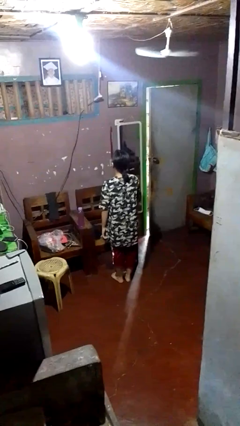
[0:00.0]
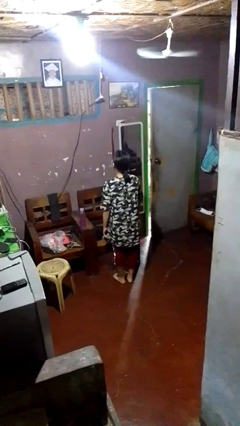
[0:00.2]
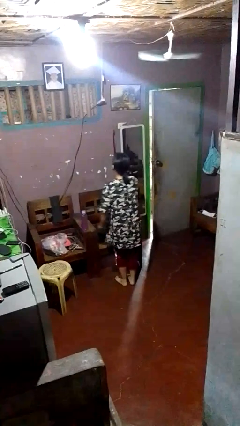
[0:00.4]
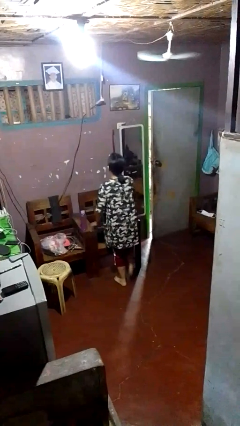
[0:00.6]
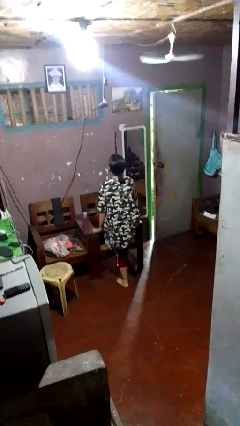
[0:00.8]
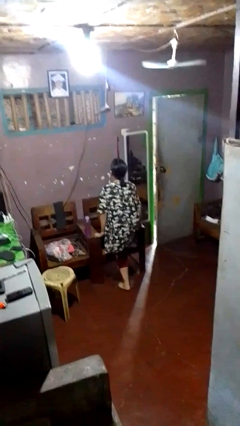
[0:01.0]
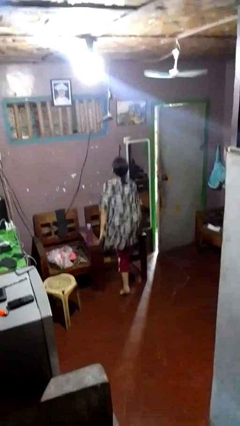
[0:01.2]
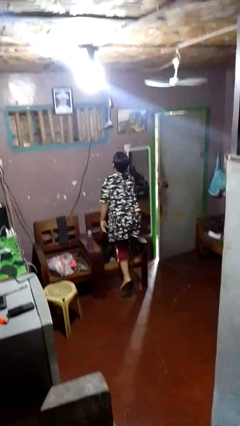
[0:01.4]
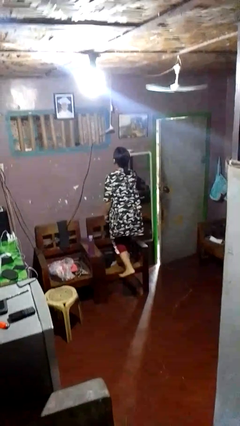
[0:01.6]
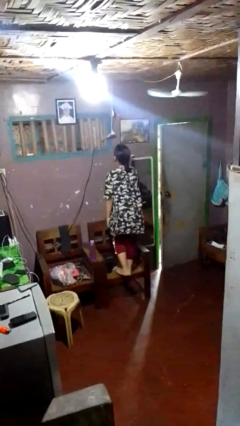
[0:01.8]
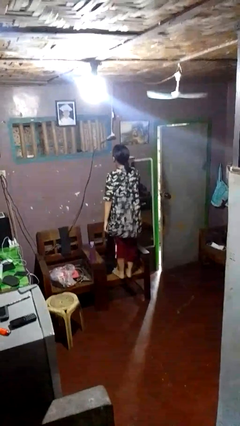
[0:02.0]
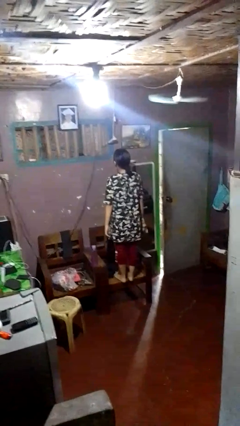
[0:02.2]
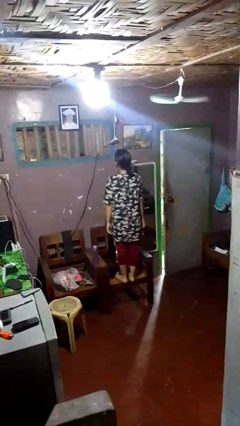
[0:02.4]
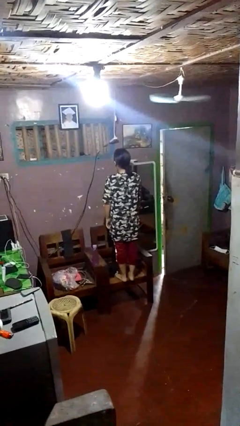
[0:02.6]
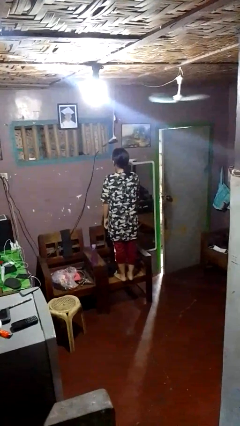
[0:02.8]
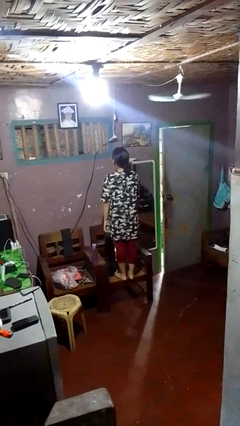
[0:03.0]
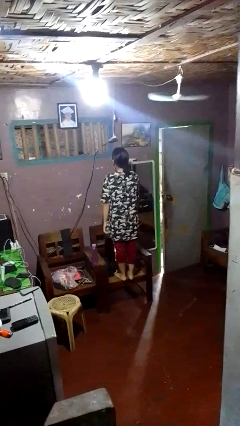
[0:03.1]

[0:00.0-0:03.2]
person climbs on chair

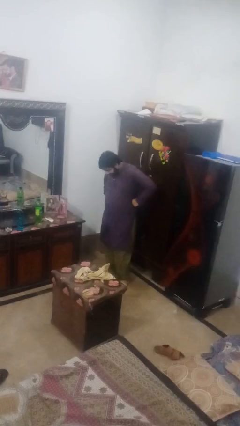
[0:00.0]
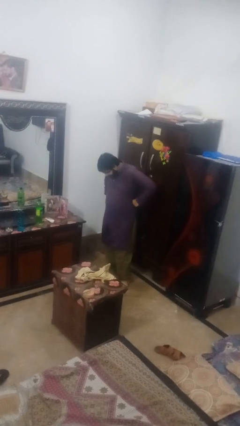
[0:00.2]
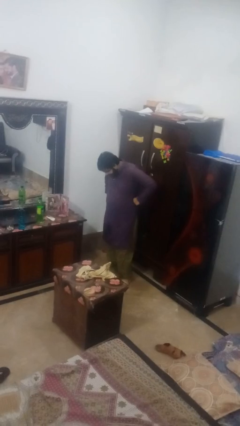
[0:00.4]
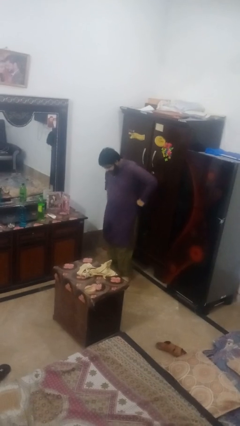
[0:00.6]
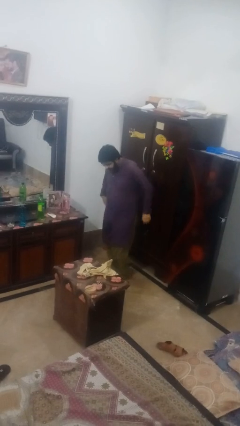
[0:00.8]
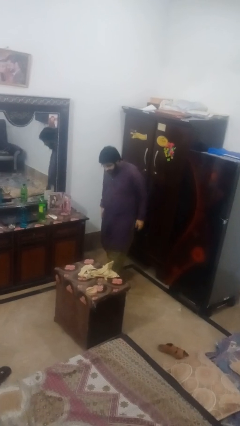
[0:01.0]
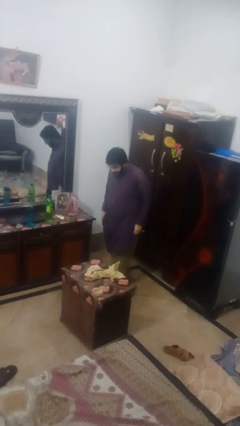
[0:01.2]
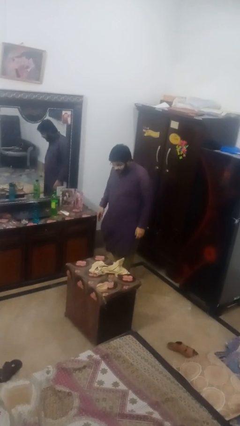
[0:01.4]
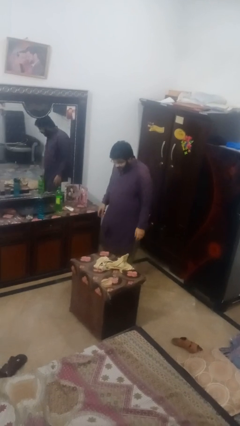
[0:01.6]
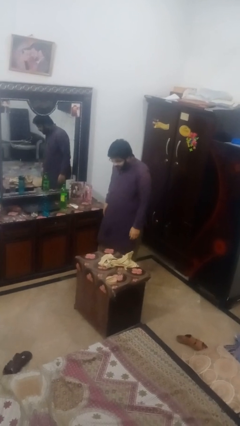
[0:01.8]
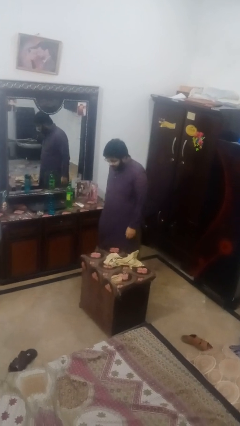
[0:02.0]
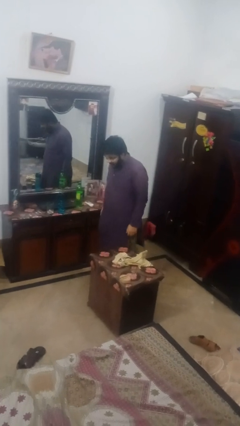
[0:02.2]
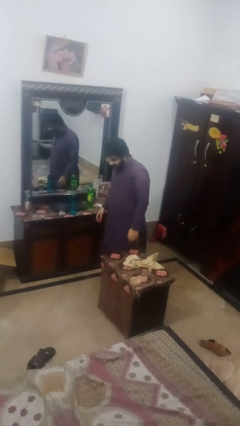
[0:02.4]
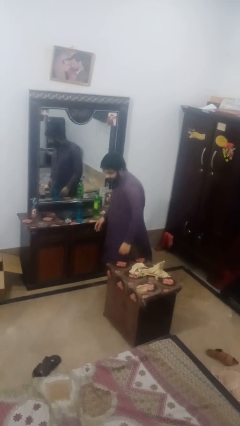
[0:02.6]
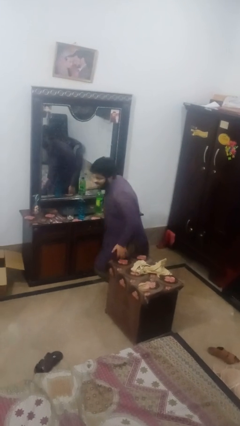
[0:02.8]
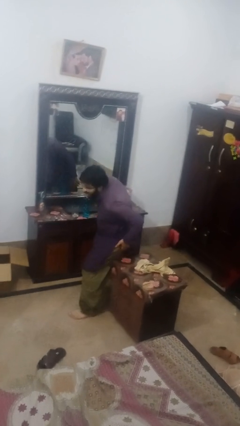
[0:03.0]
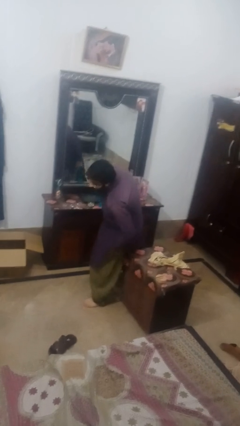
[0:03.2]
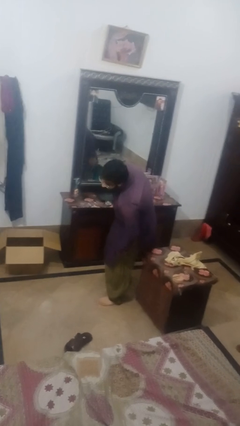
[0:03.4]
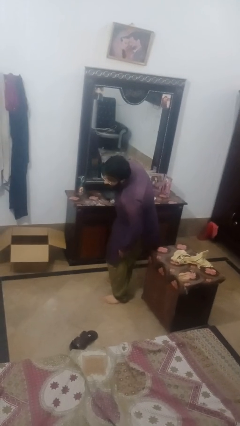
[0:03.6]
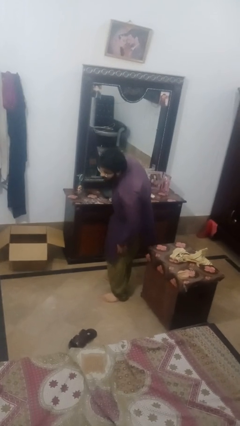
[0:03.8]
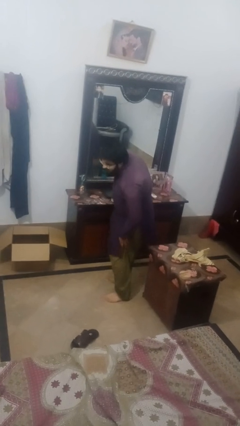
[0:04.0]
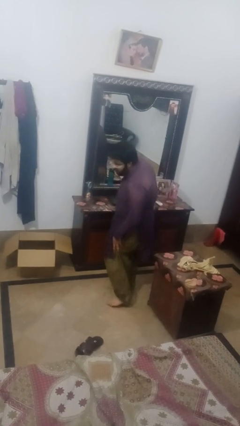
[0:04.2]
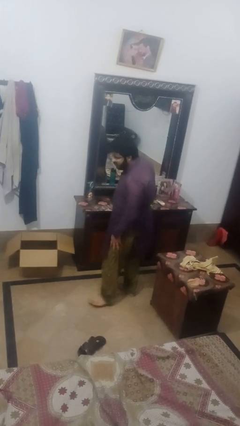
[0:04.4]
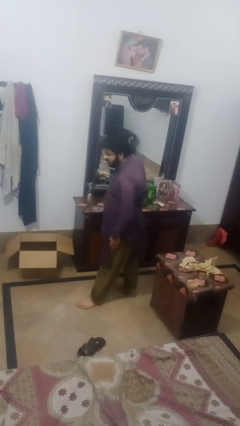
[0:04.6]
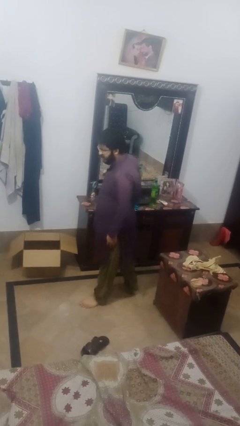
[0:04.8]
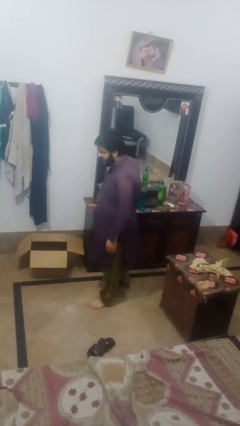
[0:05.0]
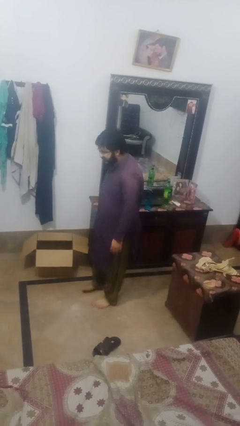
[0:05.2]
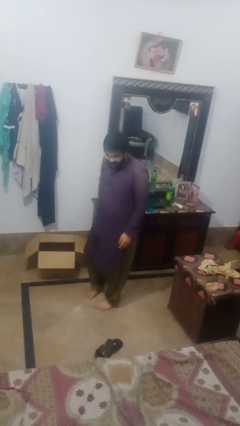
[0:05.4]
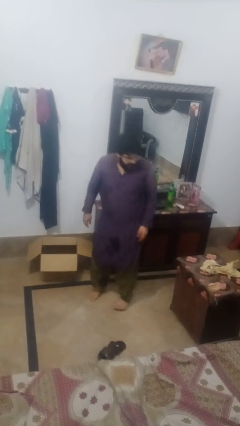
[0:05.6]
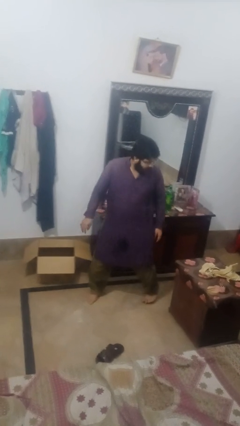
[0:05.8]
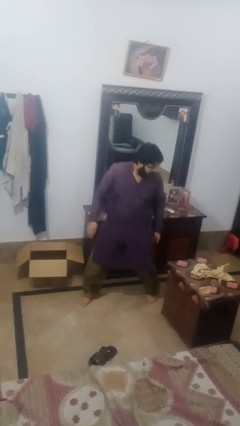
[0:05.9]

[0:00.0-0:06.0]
person bumps into table

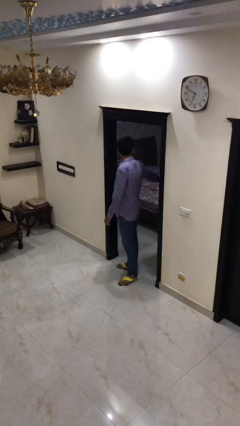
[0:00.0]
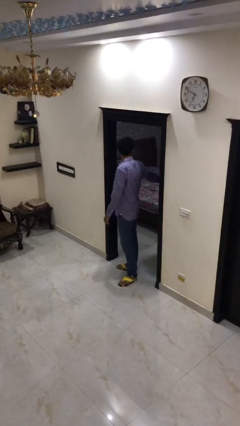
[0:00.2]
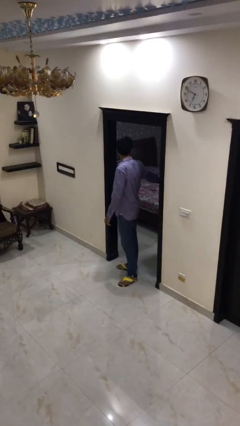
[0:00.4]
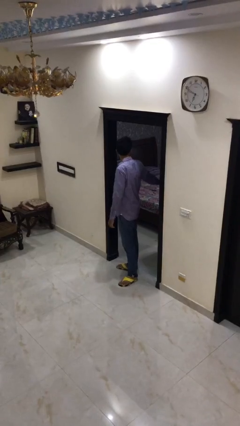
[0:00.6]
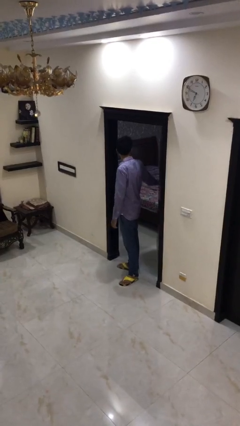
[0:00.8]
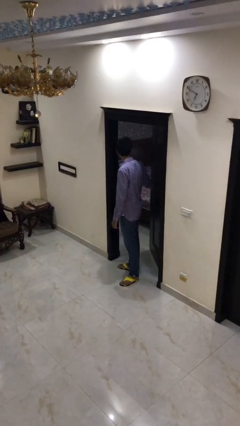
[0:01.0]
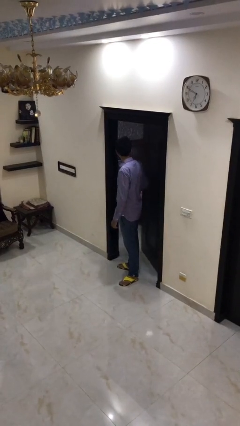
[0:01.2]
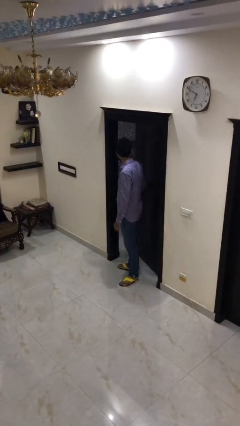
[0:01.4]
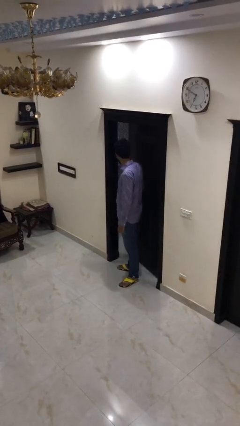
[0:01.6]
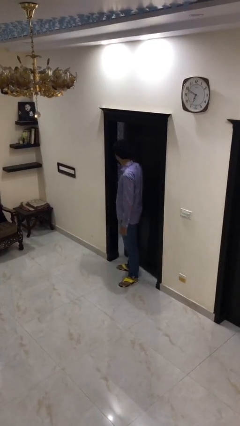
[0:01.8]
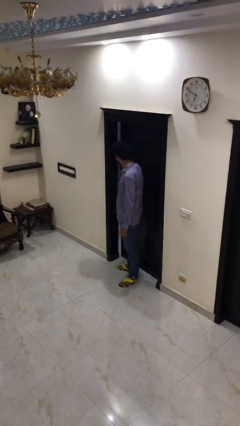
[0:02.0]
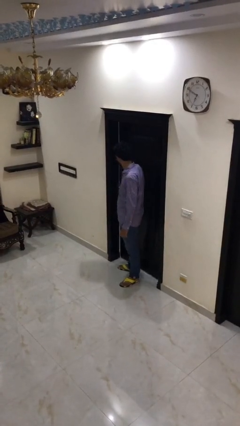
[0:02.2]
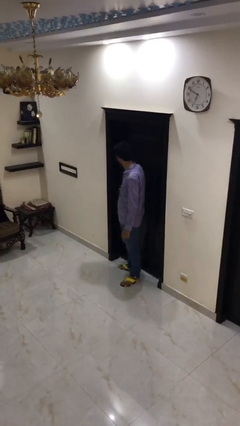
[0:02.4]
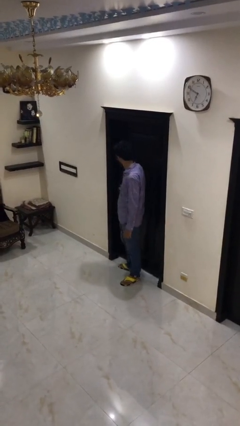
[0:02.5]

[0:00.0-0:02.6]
person closes facility door

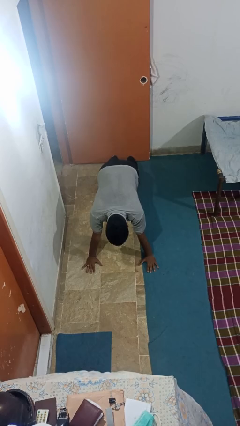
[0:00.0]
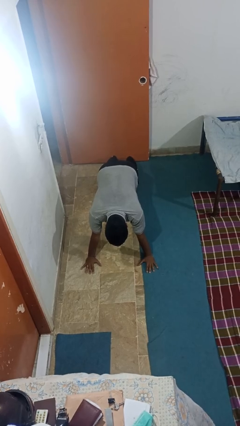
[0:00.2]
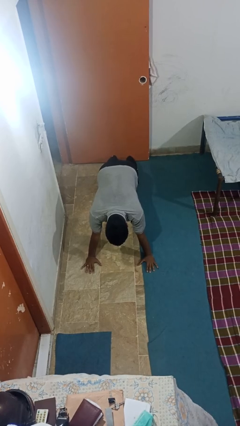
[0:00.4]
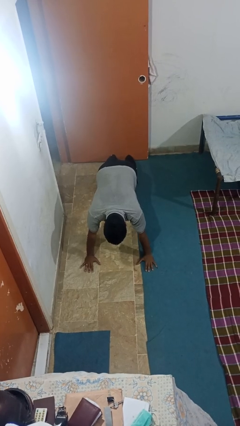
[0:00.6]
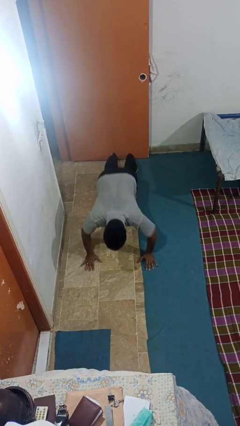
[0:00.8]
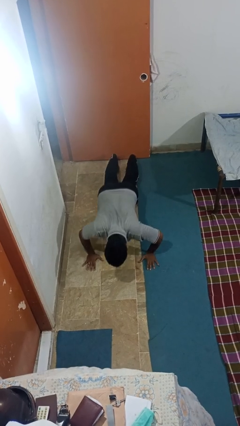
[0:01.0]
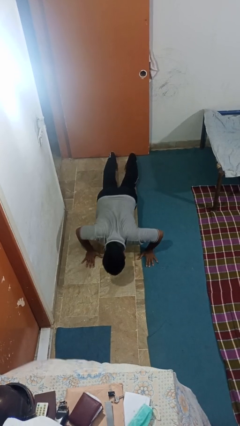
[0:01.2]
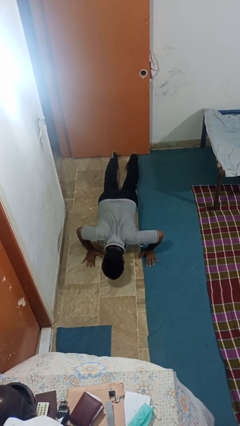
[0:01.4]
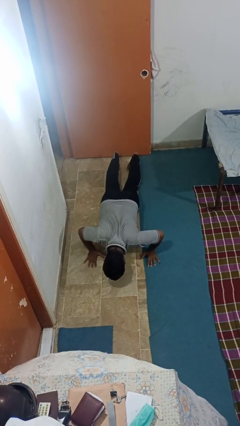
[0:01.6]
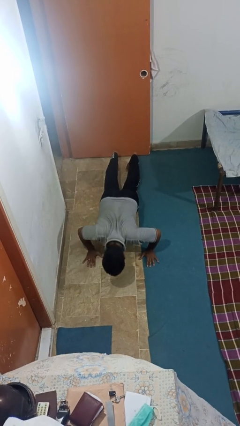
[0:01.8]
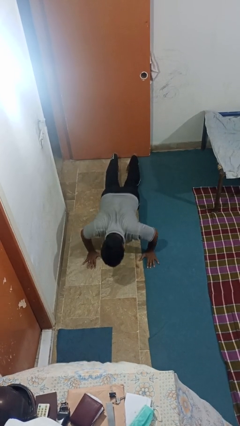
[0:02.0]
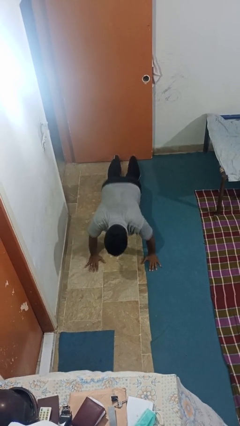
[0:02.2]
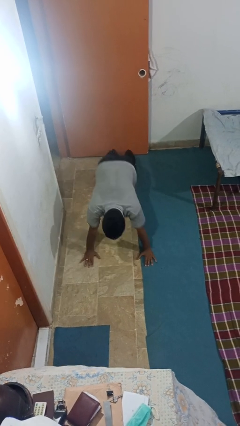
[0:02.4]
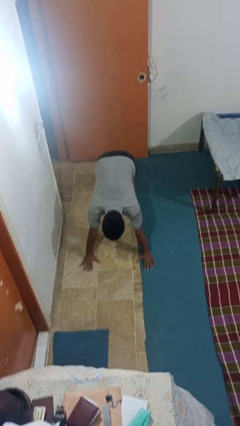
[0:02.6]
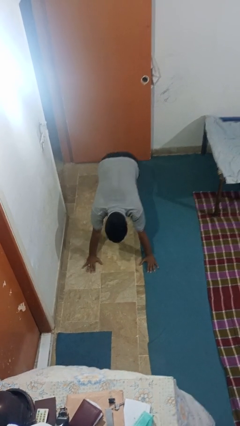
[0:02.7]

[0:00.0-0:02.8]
person exercises with pushup

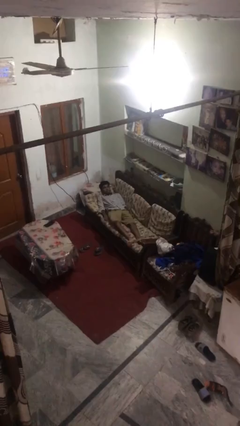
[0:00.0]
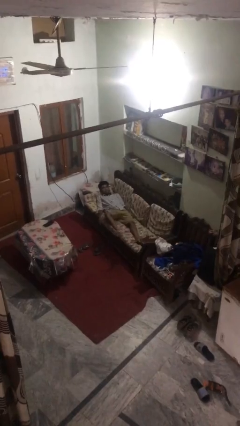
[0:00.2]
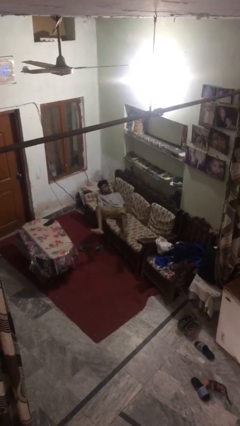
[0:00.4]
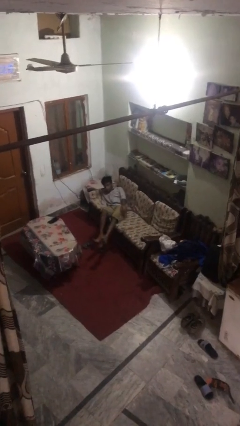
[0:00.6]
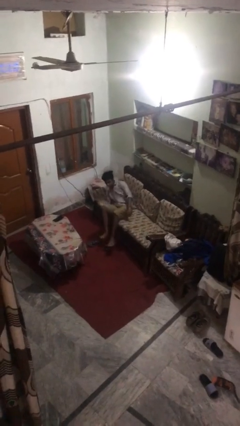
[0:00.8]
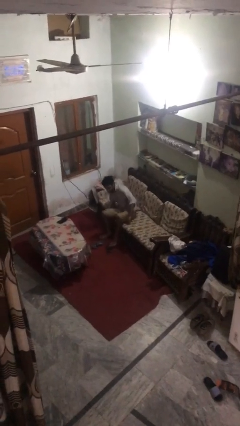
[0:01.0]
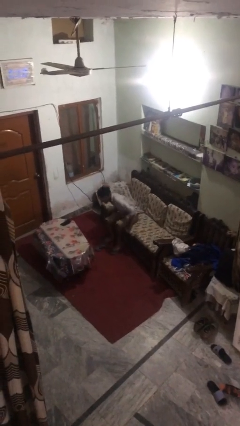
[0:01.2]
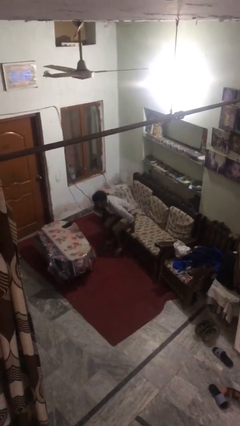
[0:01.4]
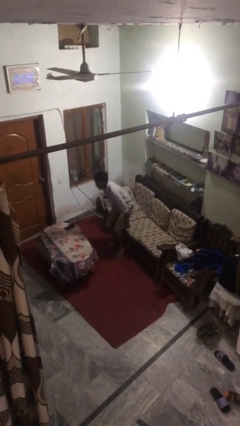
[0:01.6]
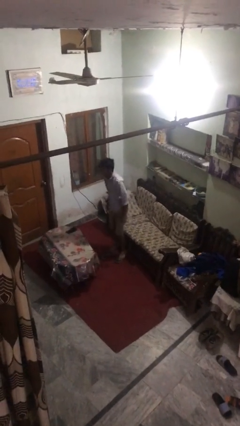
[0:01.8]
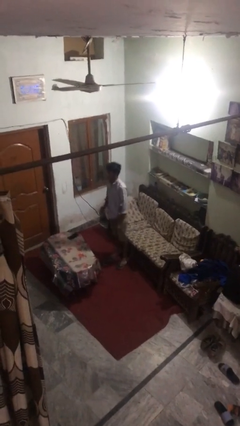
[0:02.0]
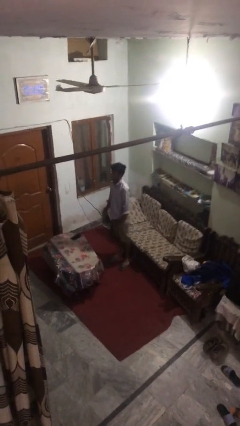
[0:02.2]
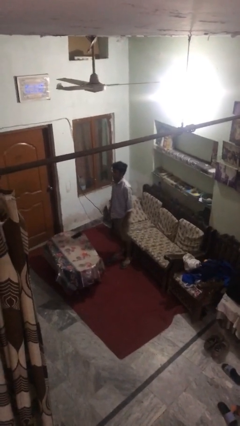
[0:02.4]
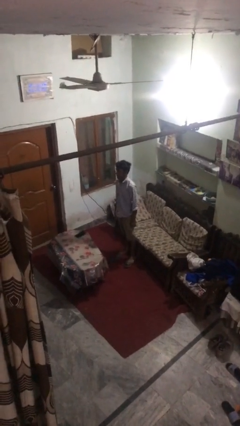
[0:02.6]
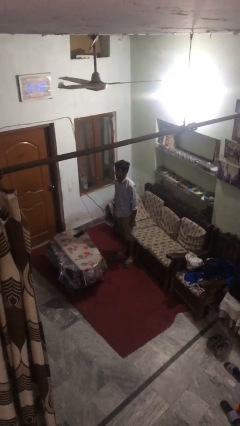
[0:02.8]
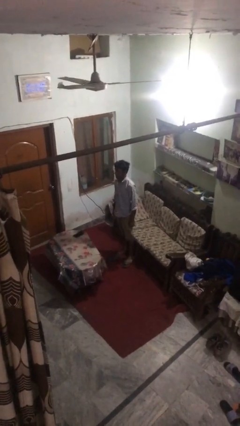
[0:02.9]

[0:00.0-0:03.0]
person stands up
